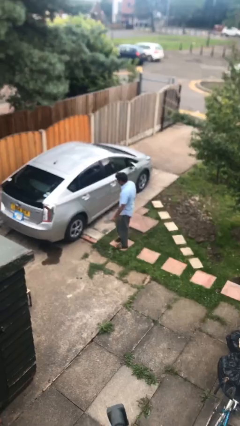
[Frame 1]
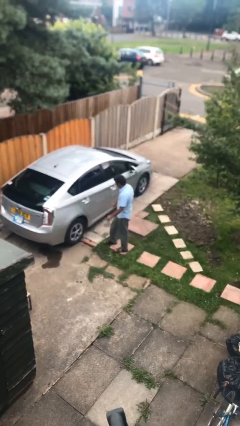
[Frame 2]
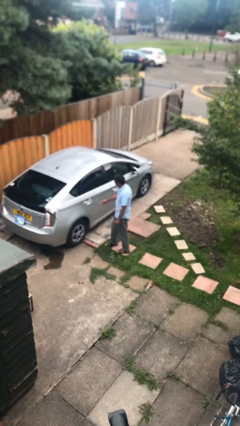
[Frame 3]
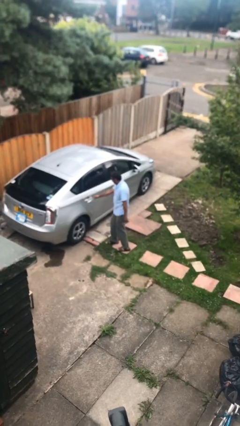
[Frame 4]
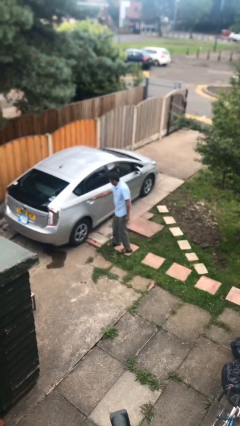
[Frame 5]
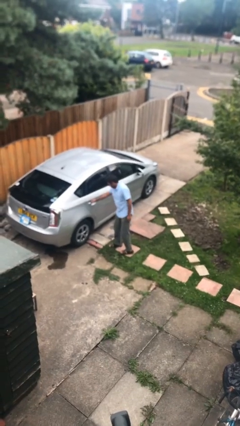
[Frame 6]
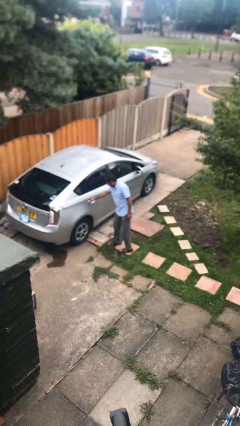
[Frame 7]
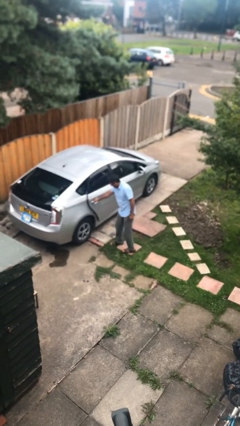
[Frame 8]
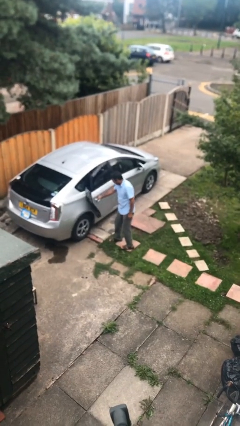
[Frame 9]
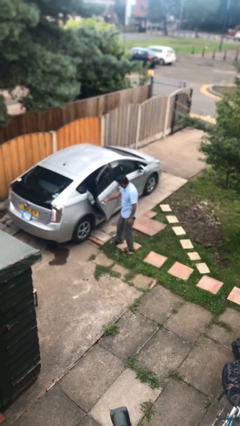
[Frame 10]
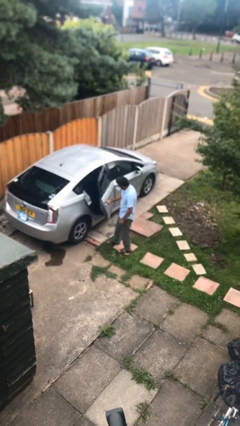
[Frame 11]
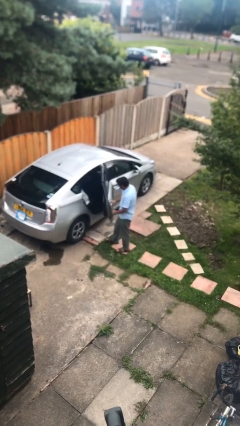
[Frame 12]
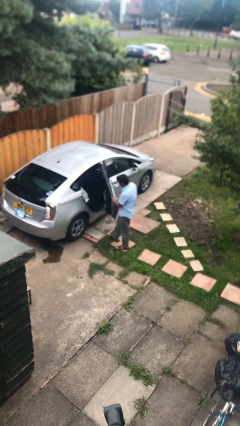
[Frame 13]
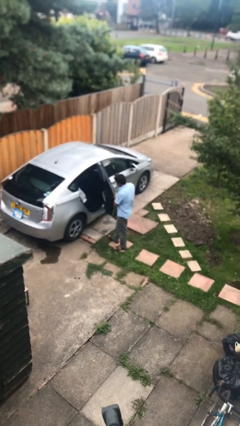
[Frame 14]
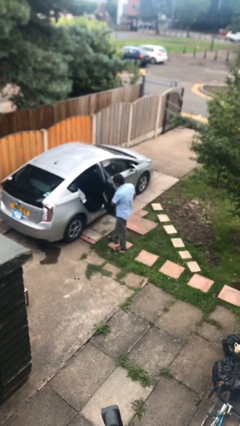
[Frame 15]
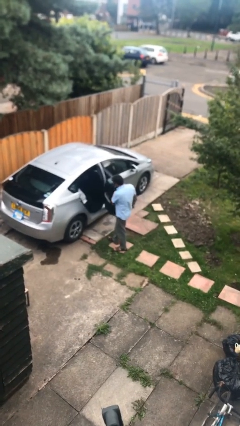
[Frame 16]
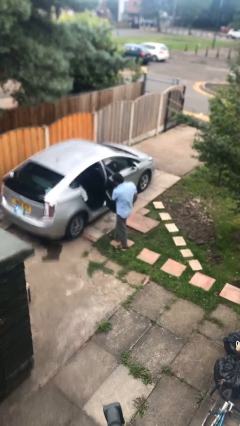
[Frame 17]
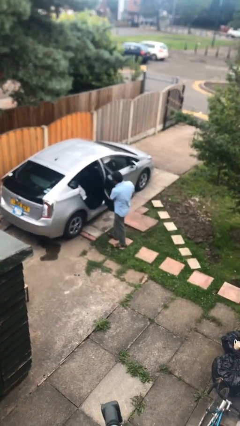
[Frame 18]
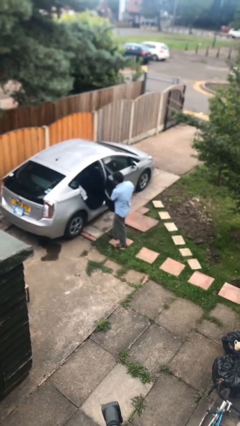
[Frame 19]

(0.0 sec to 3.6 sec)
person opens car door

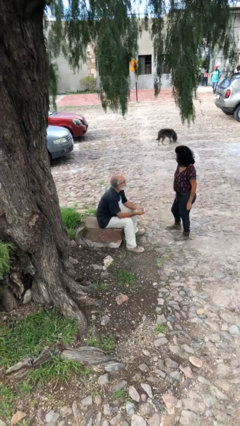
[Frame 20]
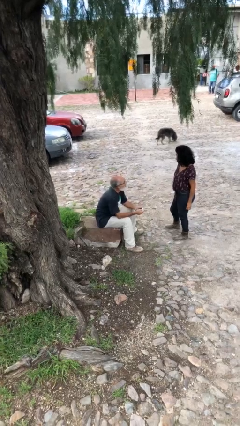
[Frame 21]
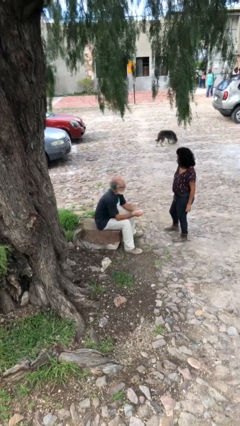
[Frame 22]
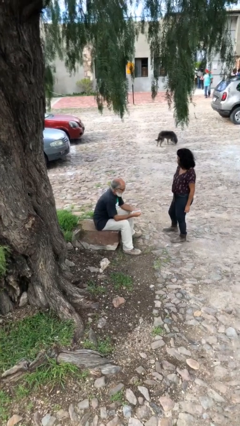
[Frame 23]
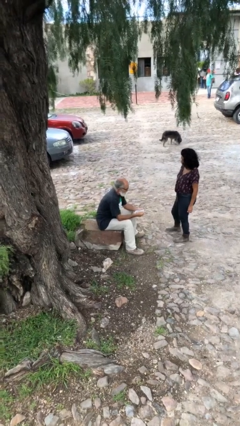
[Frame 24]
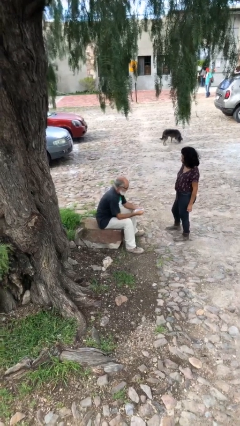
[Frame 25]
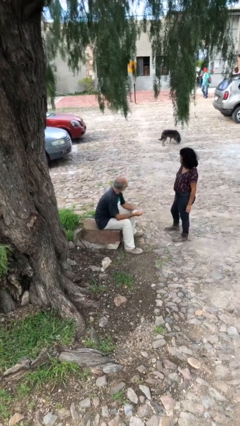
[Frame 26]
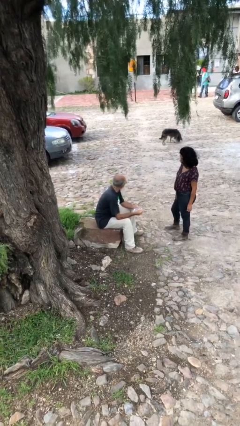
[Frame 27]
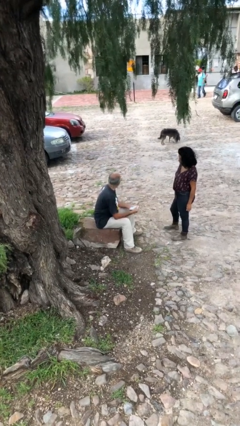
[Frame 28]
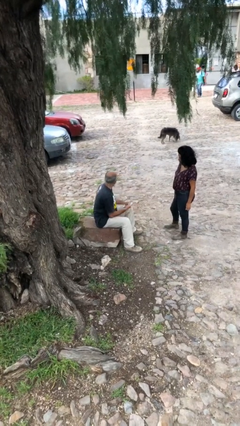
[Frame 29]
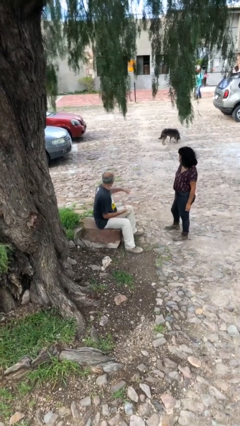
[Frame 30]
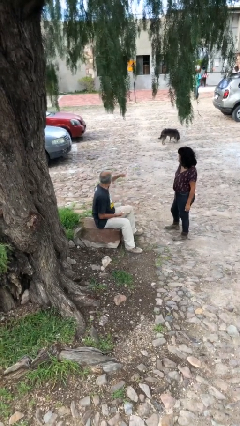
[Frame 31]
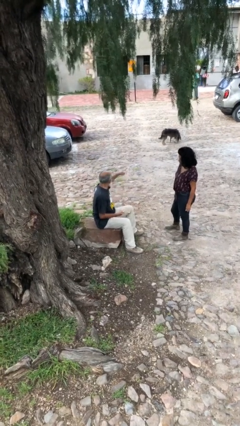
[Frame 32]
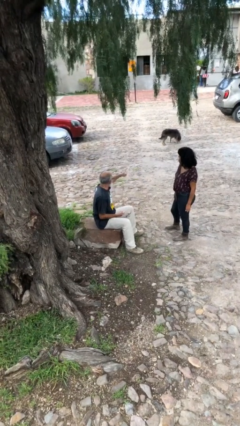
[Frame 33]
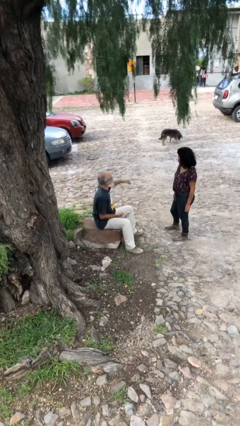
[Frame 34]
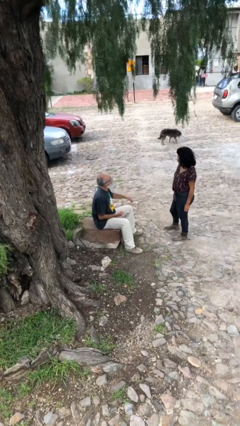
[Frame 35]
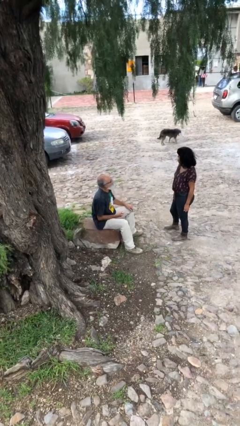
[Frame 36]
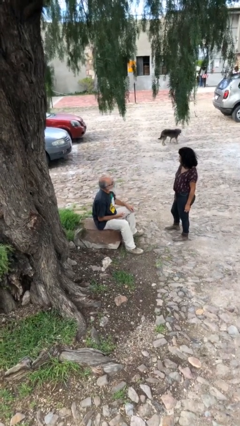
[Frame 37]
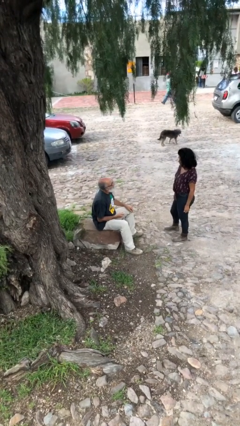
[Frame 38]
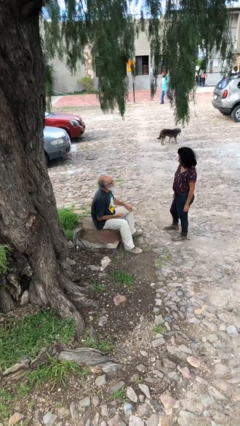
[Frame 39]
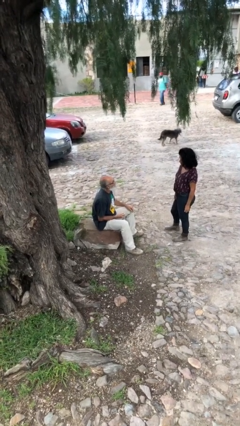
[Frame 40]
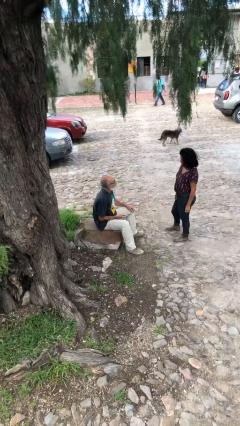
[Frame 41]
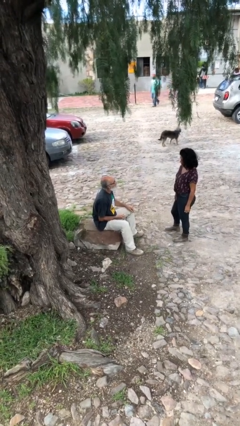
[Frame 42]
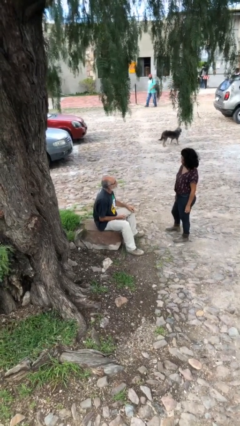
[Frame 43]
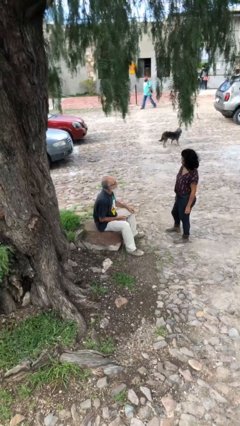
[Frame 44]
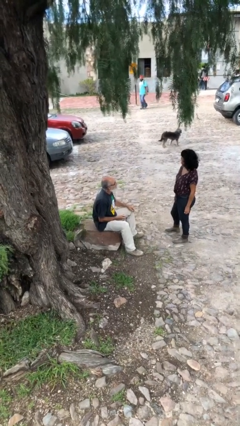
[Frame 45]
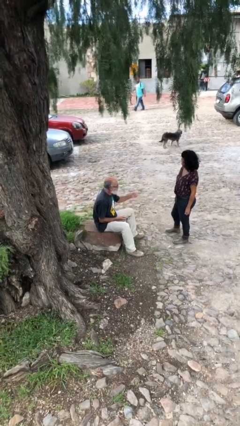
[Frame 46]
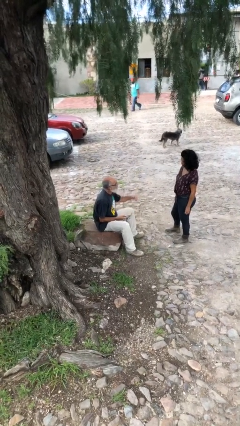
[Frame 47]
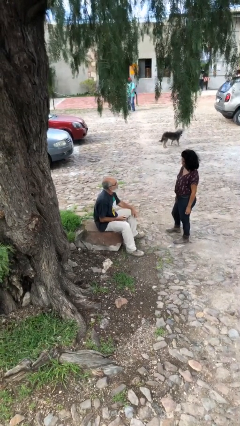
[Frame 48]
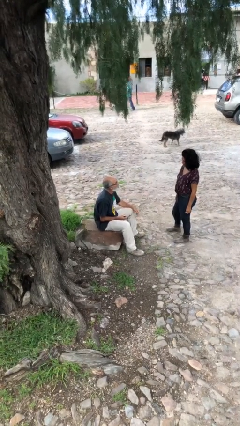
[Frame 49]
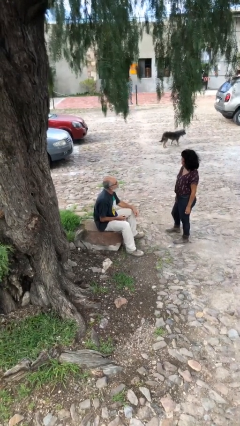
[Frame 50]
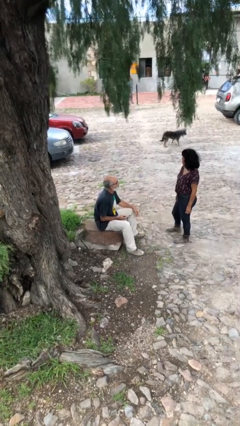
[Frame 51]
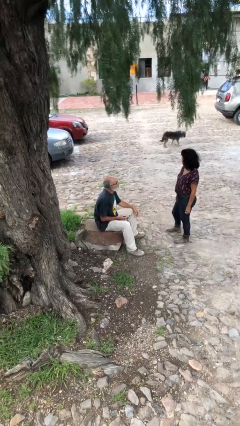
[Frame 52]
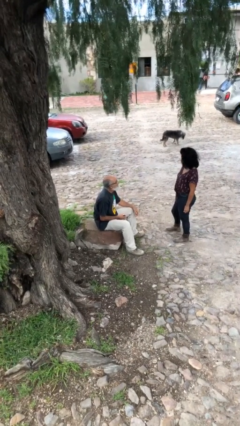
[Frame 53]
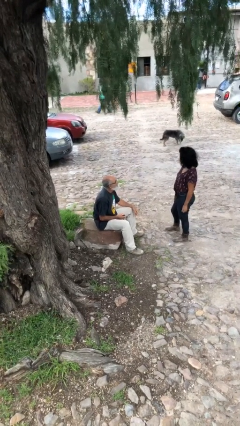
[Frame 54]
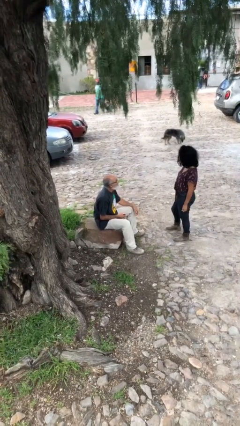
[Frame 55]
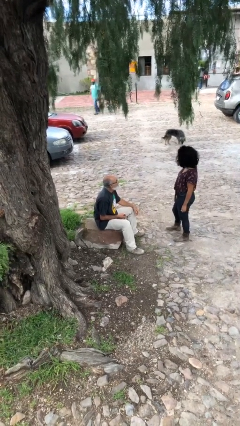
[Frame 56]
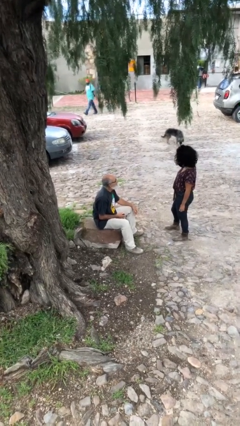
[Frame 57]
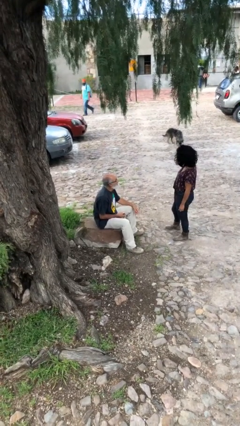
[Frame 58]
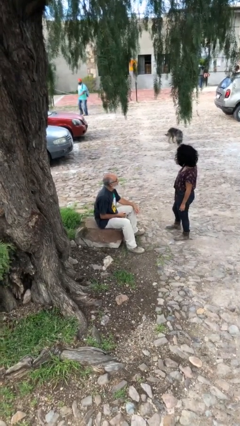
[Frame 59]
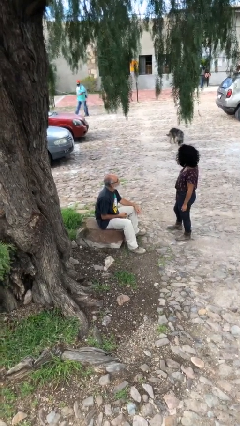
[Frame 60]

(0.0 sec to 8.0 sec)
person talks to person

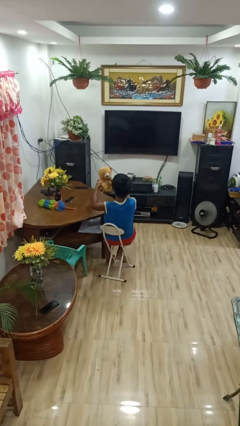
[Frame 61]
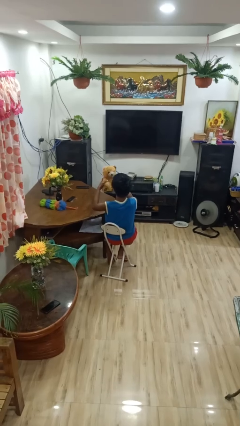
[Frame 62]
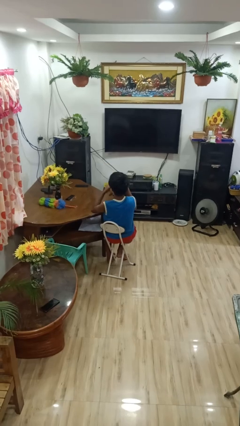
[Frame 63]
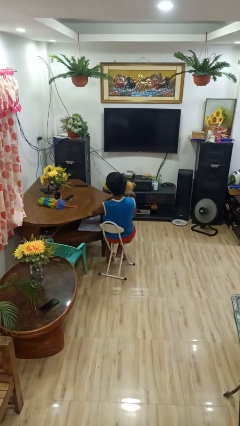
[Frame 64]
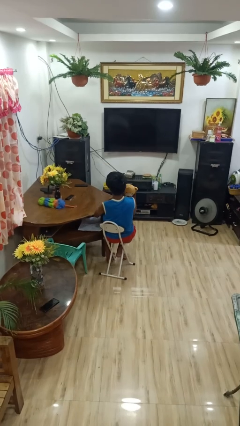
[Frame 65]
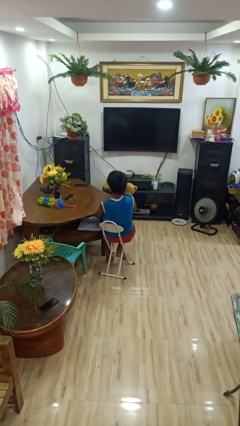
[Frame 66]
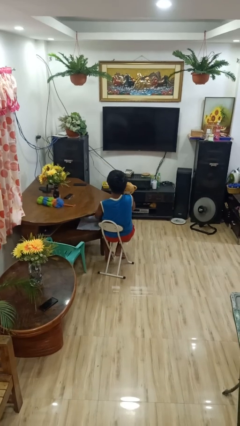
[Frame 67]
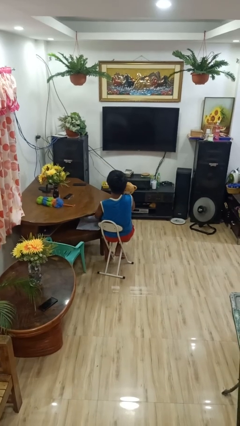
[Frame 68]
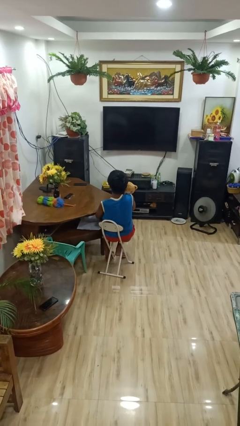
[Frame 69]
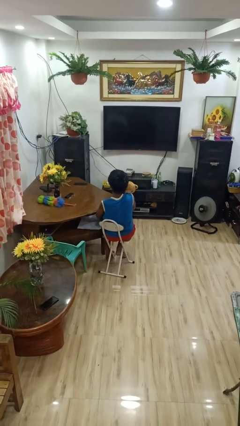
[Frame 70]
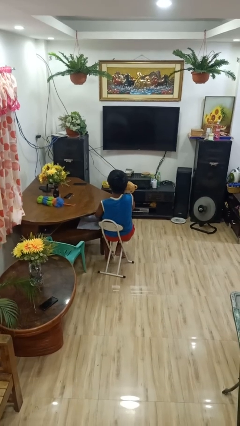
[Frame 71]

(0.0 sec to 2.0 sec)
person hugs stuffed animal

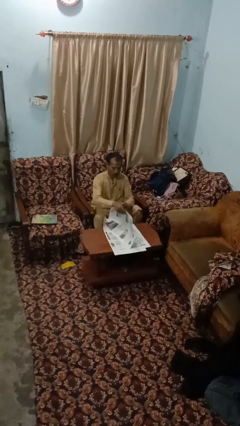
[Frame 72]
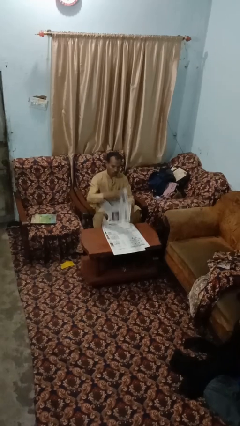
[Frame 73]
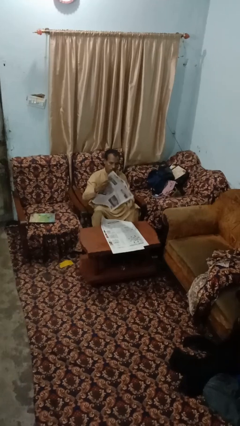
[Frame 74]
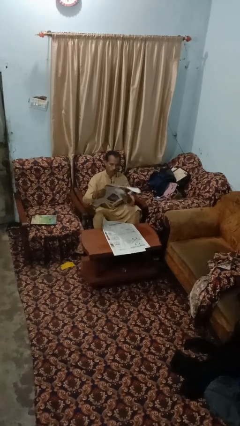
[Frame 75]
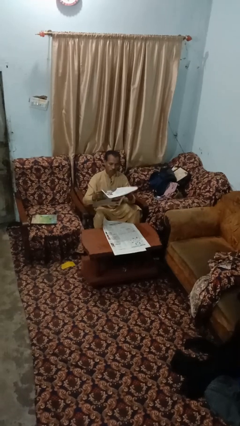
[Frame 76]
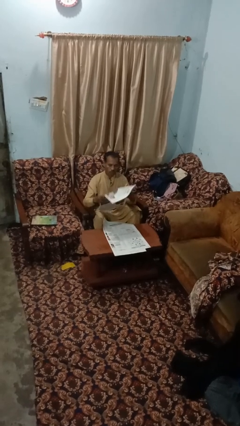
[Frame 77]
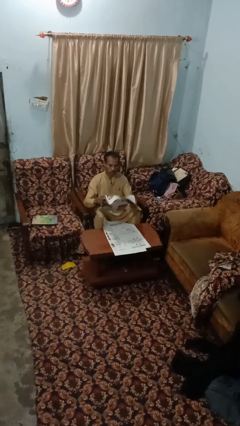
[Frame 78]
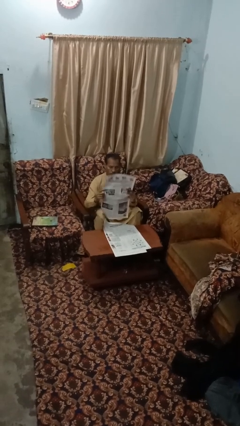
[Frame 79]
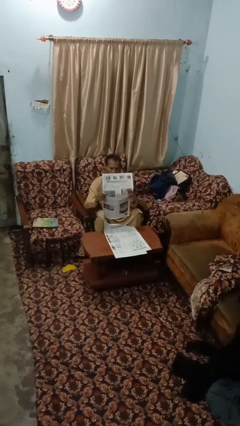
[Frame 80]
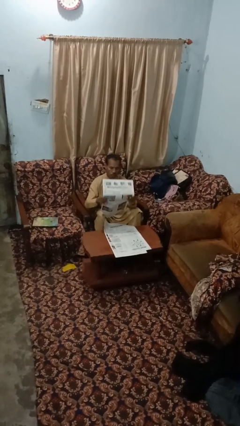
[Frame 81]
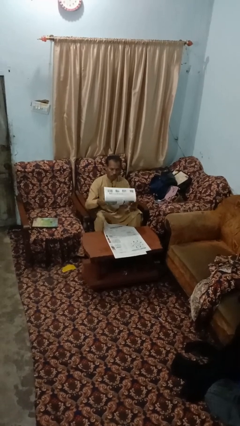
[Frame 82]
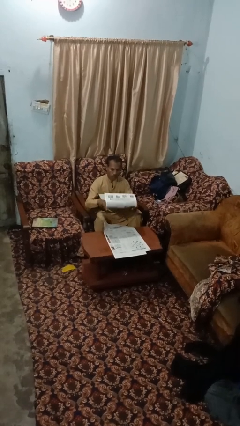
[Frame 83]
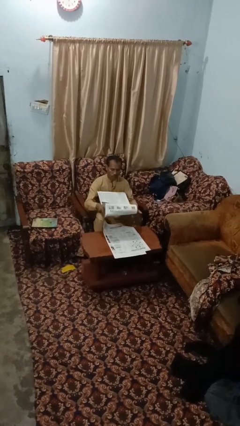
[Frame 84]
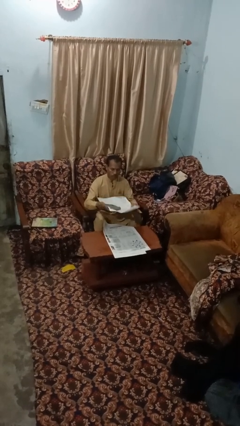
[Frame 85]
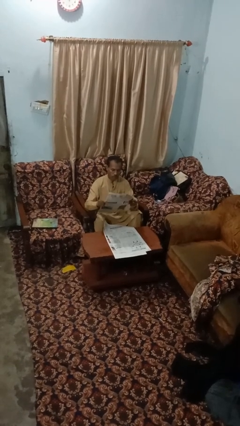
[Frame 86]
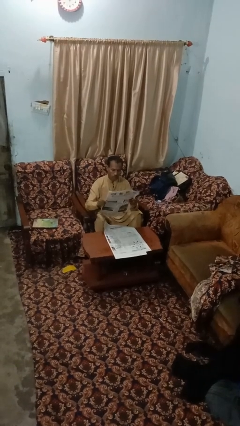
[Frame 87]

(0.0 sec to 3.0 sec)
person reads newspaper

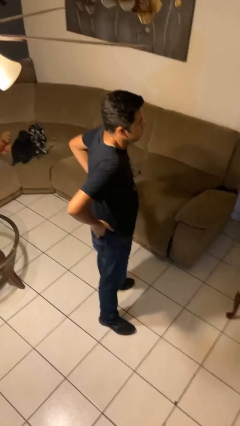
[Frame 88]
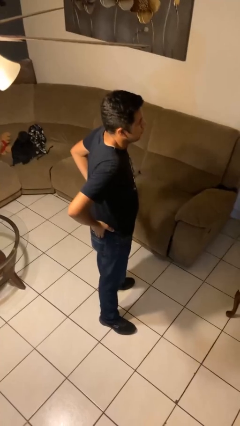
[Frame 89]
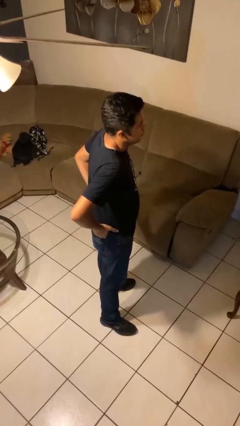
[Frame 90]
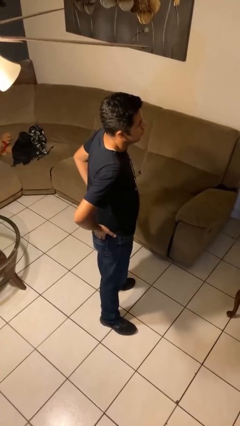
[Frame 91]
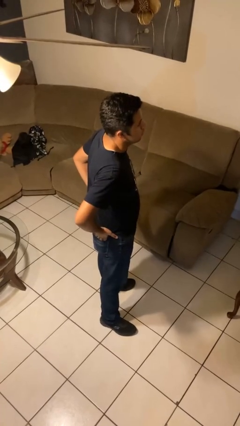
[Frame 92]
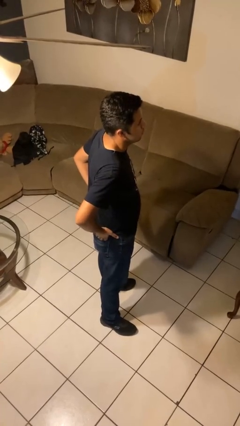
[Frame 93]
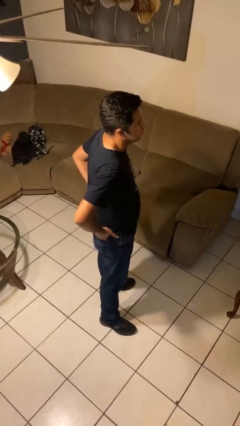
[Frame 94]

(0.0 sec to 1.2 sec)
person puts hands in back pockets
